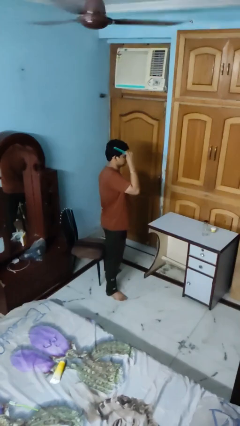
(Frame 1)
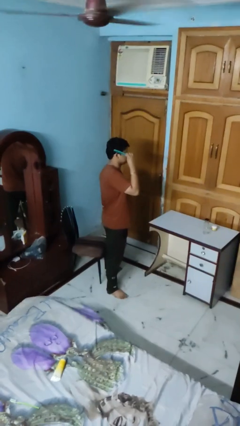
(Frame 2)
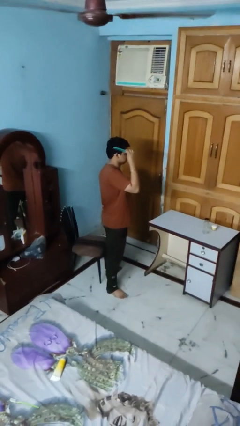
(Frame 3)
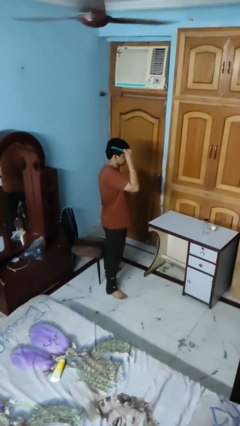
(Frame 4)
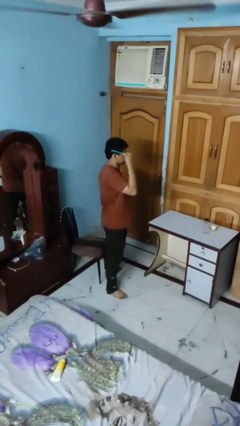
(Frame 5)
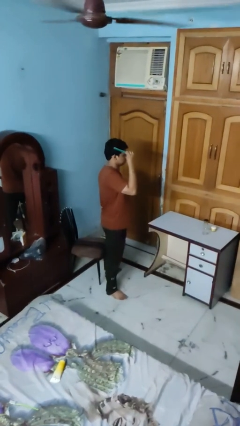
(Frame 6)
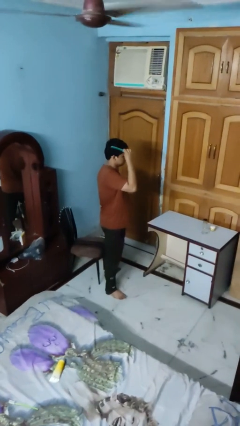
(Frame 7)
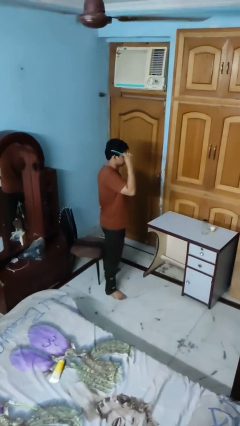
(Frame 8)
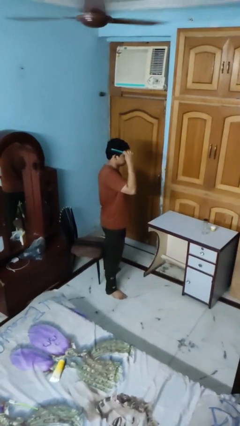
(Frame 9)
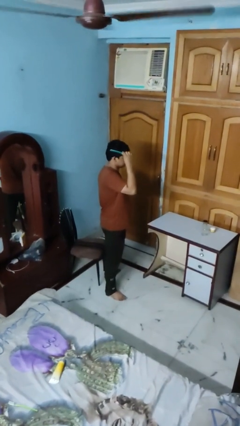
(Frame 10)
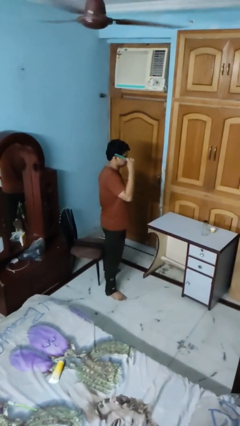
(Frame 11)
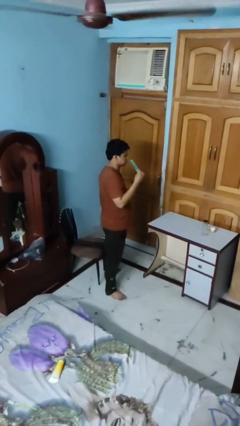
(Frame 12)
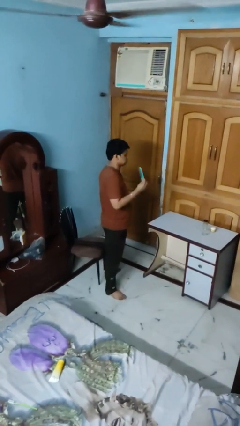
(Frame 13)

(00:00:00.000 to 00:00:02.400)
person brushes hair

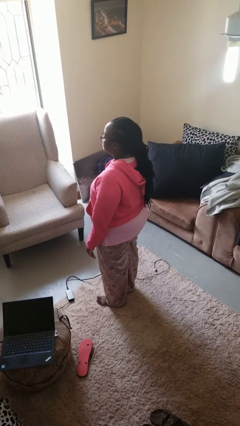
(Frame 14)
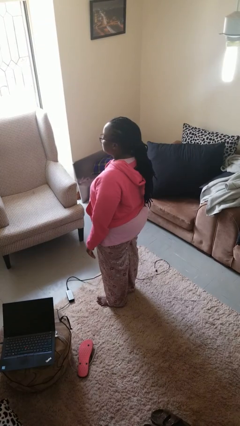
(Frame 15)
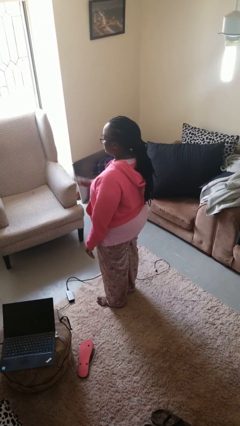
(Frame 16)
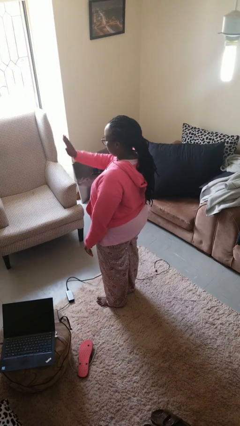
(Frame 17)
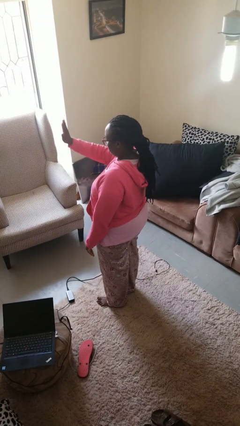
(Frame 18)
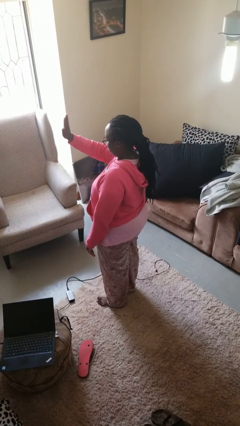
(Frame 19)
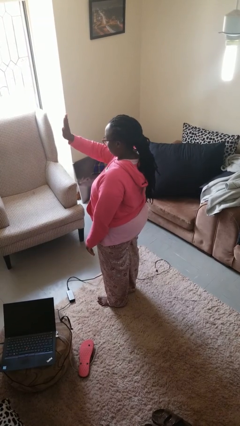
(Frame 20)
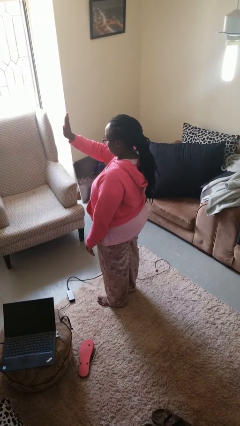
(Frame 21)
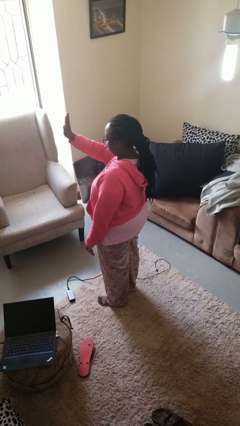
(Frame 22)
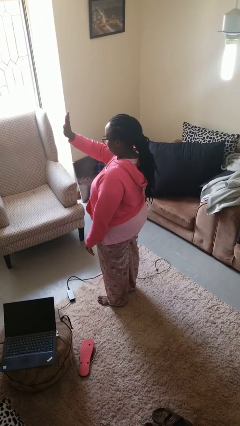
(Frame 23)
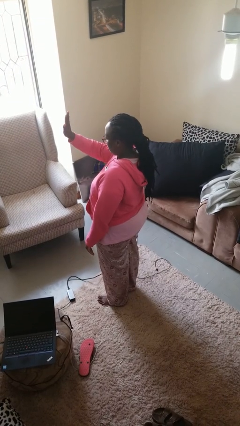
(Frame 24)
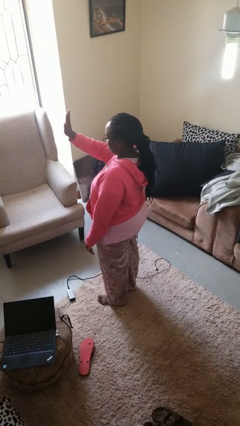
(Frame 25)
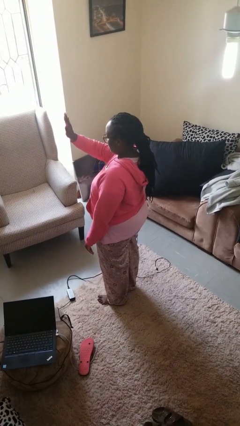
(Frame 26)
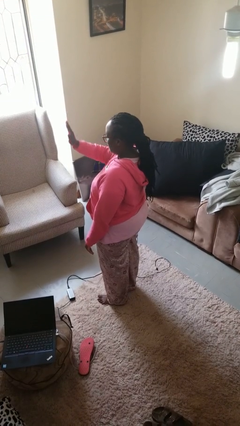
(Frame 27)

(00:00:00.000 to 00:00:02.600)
person gestures stop

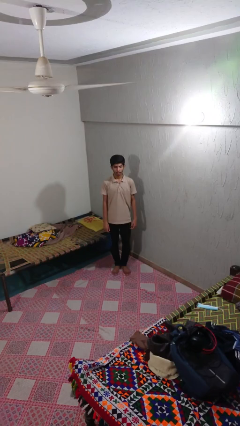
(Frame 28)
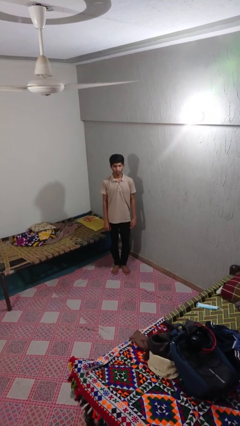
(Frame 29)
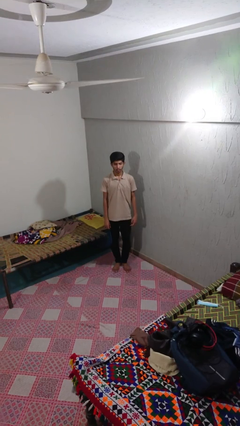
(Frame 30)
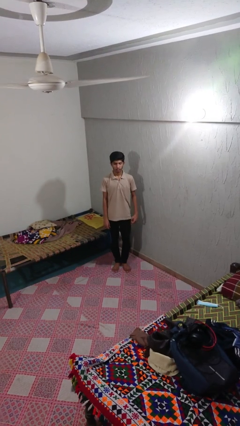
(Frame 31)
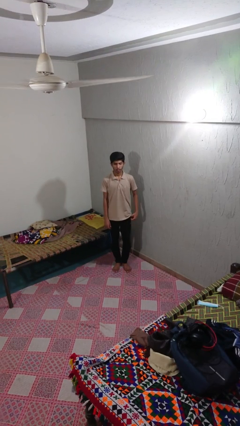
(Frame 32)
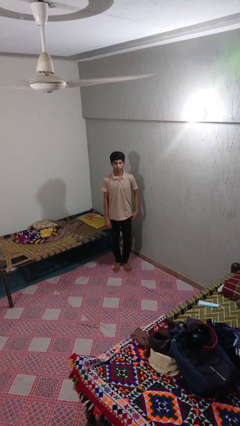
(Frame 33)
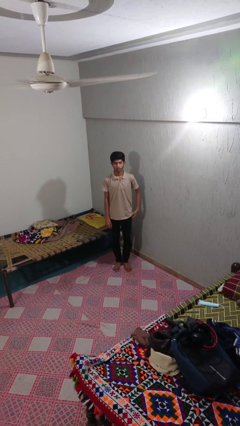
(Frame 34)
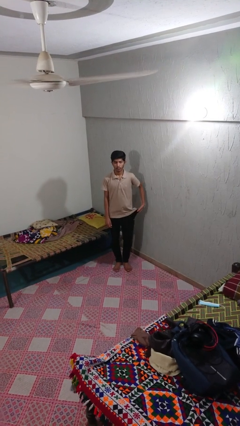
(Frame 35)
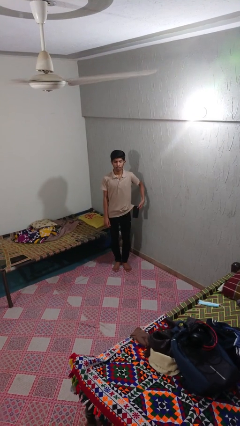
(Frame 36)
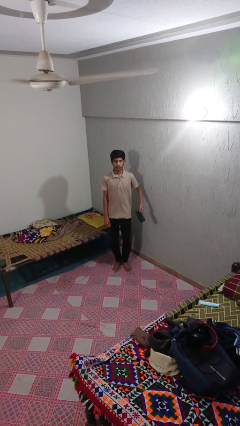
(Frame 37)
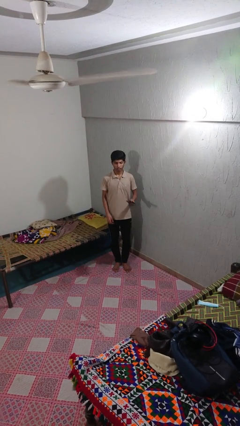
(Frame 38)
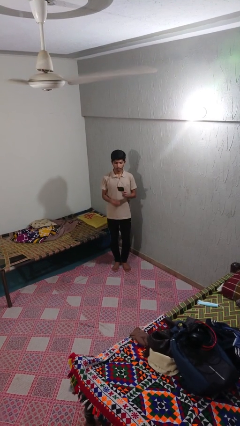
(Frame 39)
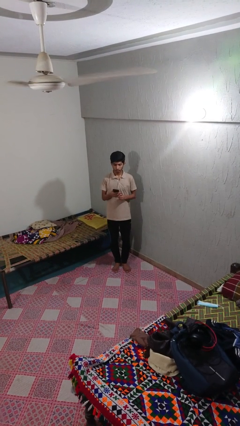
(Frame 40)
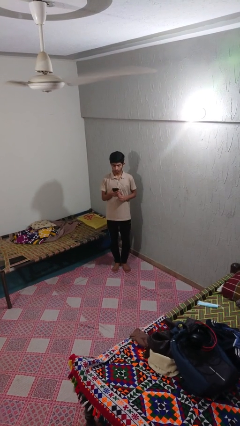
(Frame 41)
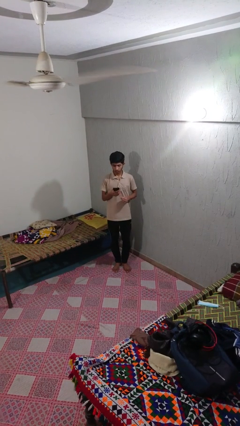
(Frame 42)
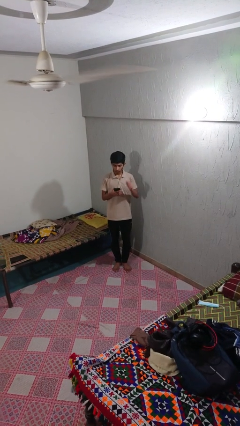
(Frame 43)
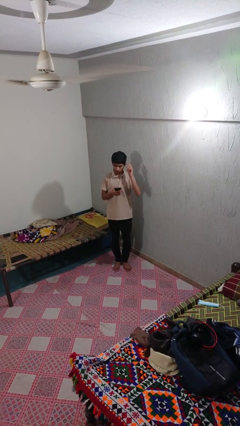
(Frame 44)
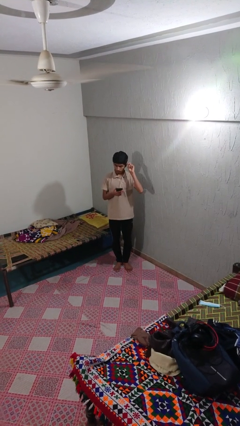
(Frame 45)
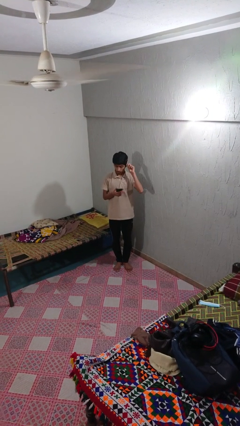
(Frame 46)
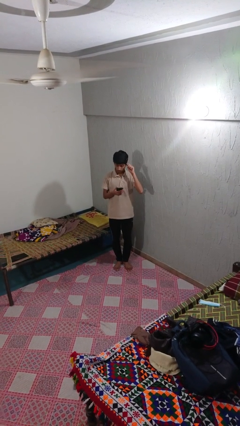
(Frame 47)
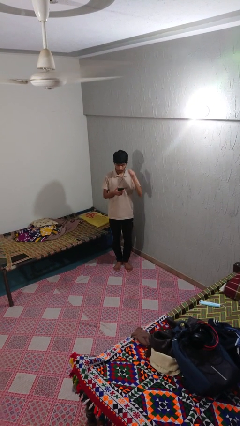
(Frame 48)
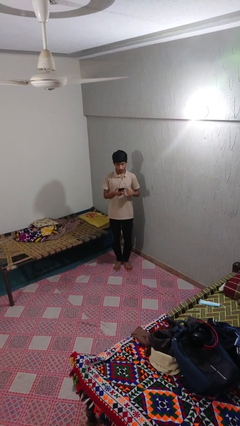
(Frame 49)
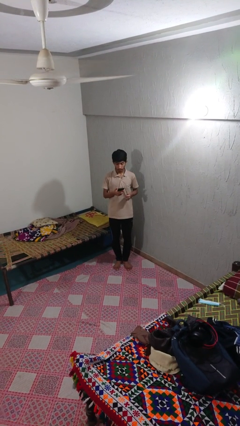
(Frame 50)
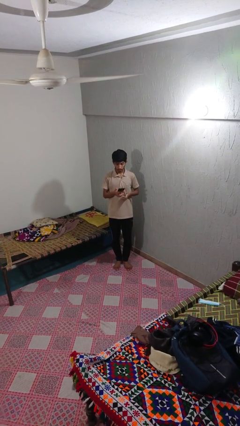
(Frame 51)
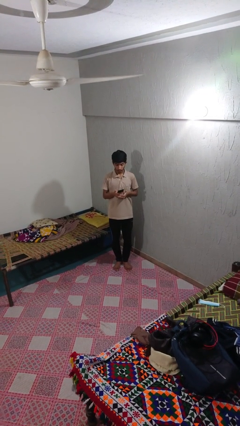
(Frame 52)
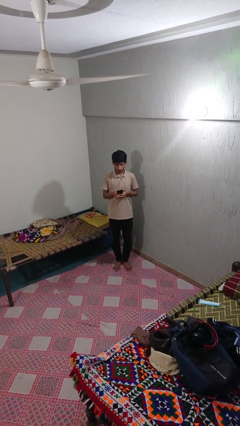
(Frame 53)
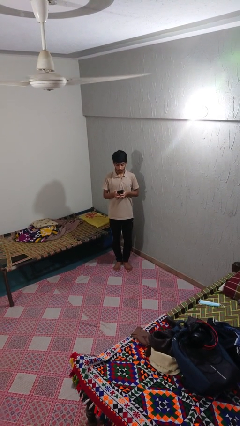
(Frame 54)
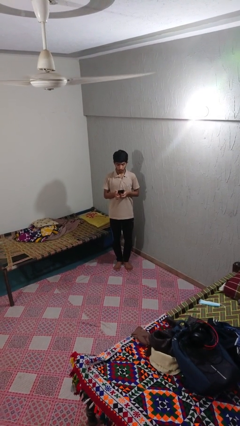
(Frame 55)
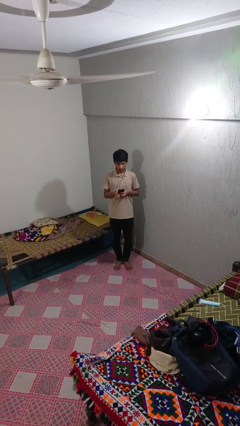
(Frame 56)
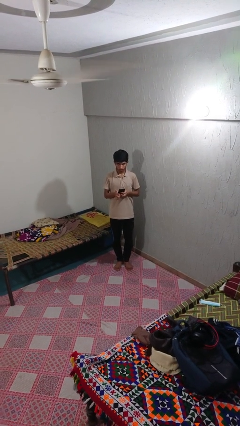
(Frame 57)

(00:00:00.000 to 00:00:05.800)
person takes phone from pocket

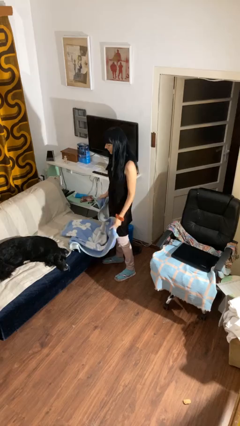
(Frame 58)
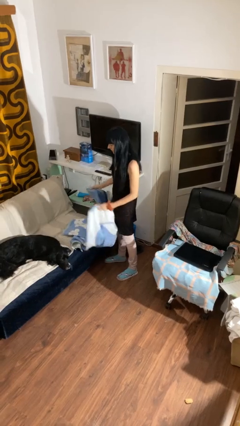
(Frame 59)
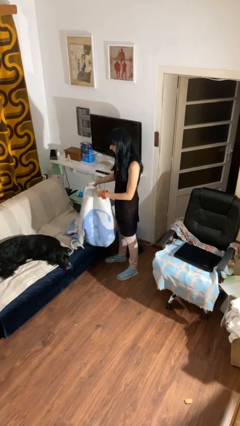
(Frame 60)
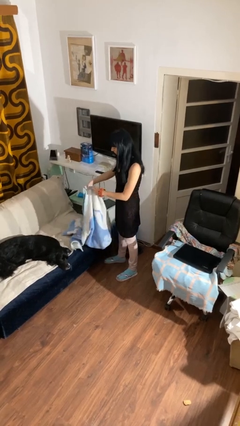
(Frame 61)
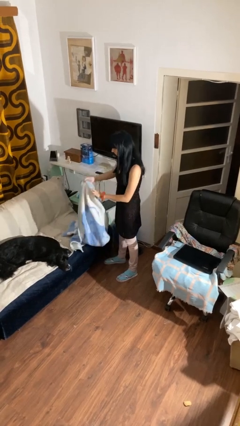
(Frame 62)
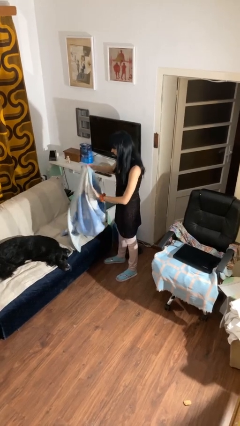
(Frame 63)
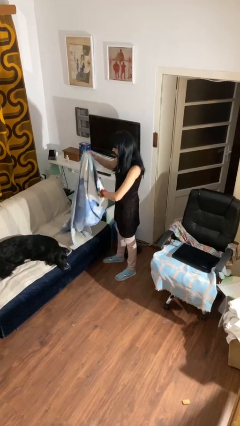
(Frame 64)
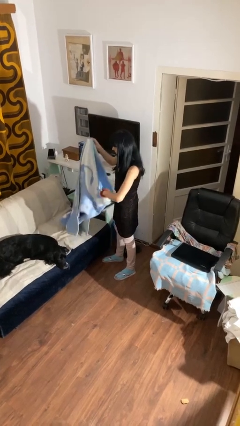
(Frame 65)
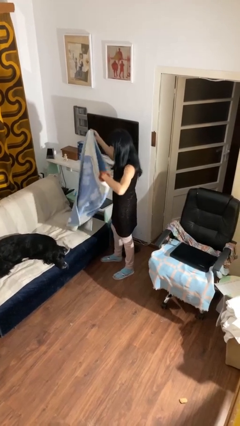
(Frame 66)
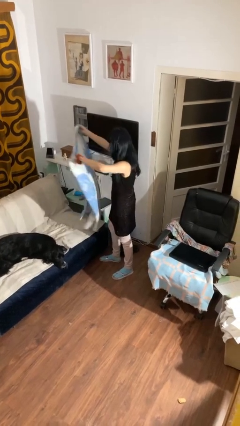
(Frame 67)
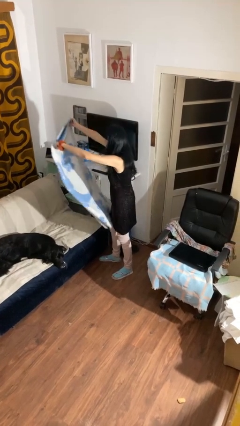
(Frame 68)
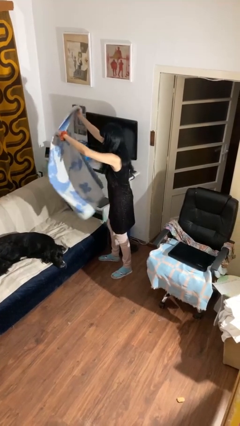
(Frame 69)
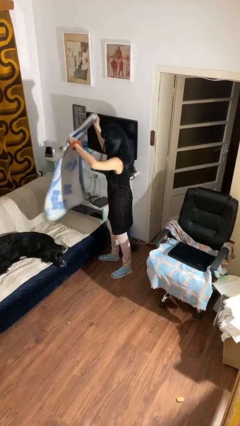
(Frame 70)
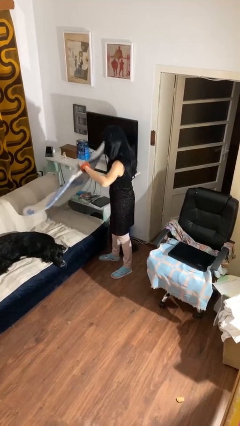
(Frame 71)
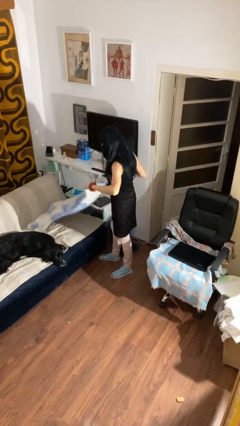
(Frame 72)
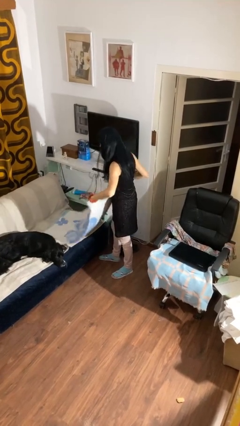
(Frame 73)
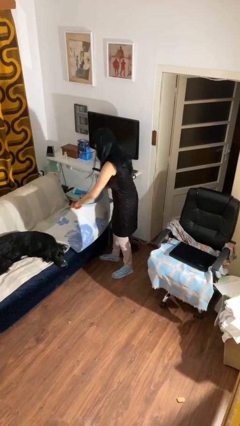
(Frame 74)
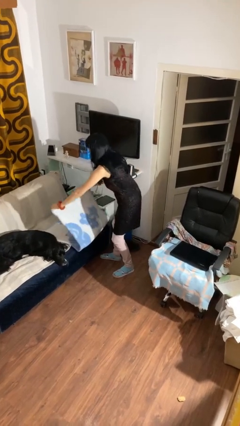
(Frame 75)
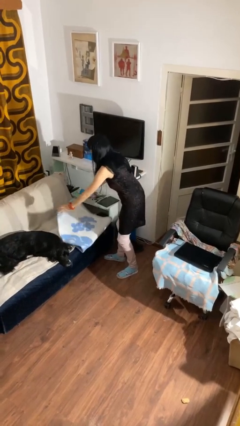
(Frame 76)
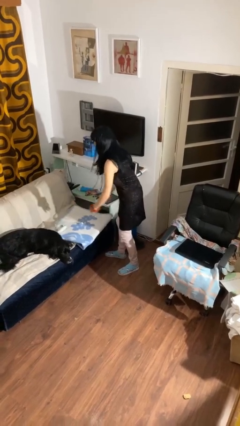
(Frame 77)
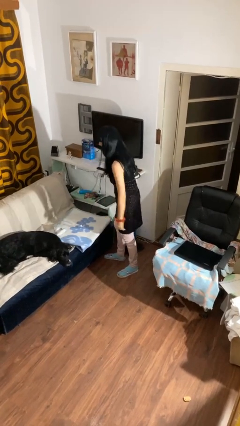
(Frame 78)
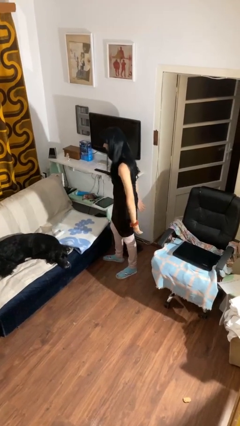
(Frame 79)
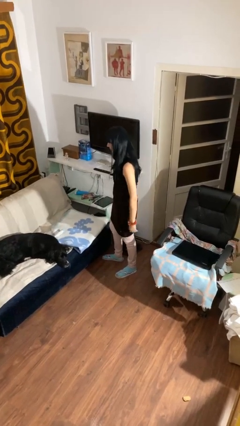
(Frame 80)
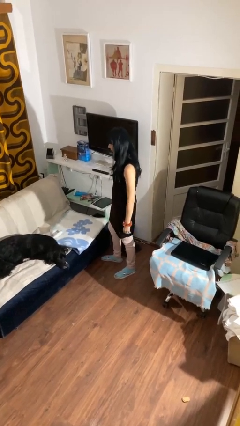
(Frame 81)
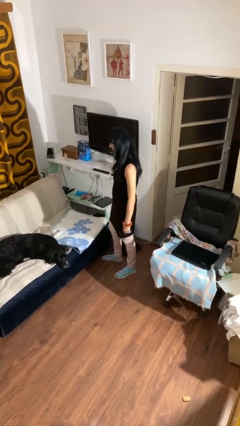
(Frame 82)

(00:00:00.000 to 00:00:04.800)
person folds blanket

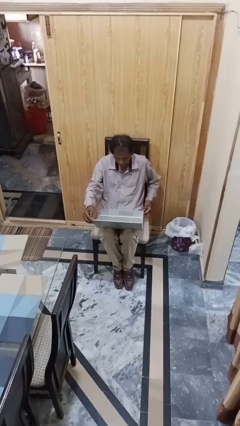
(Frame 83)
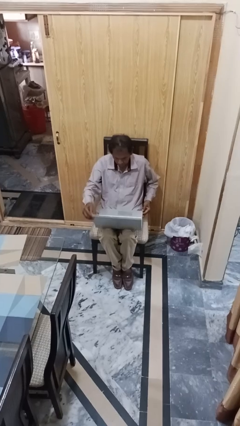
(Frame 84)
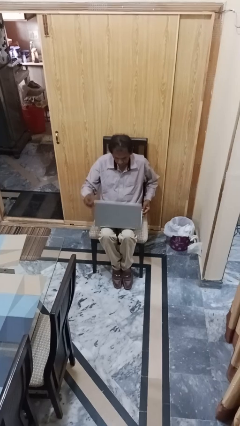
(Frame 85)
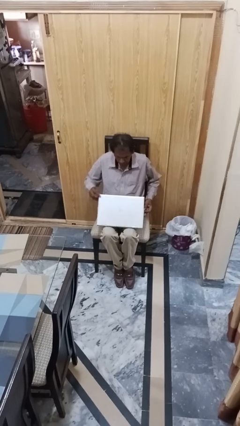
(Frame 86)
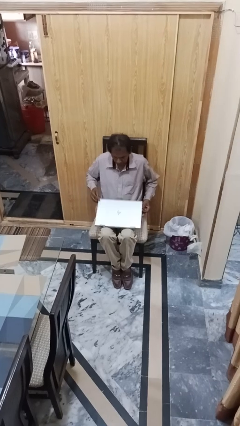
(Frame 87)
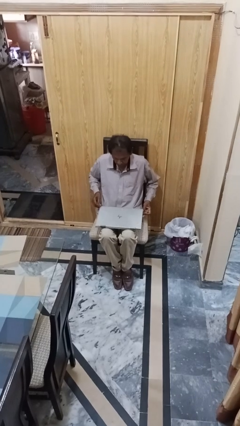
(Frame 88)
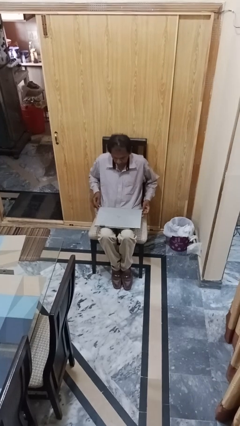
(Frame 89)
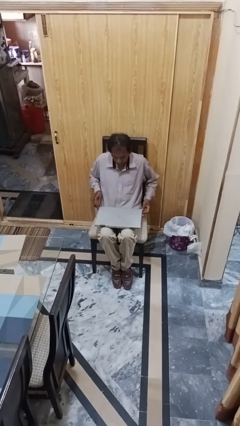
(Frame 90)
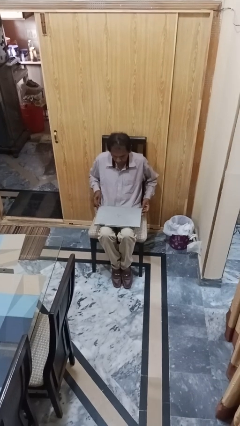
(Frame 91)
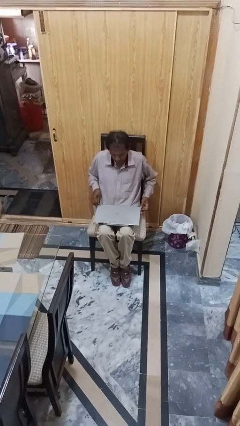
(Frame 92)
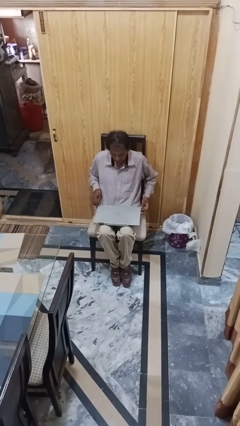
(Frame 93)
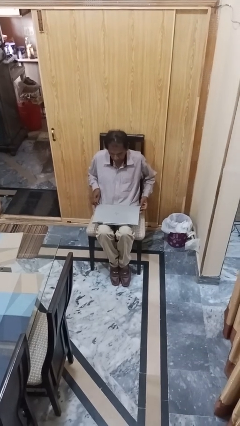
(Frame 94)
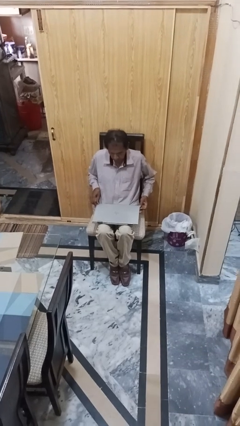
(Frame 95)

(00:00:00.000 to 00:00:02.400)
person closes laptop
